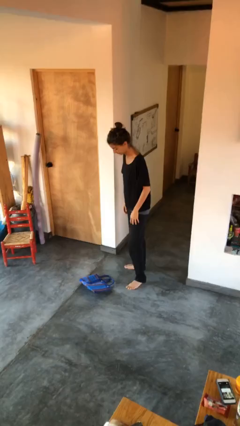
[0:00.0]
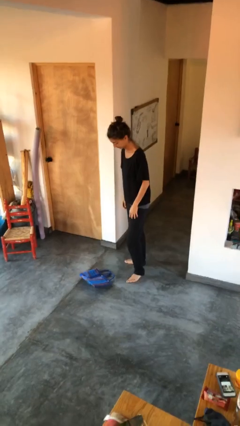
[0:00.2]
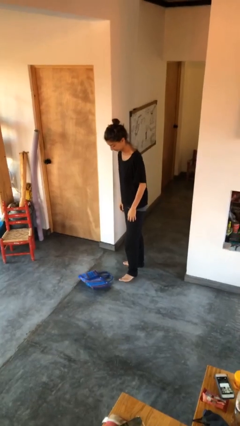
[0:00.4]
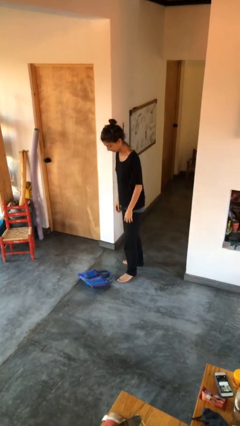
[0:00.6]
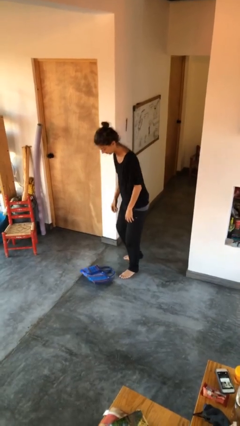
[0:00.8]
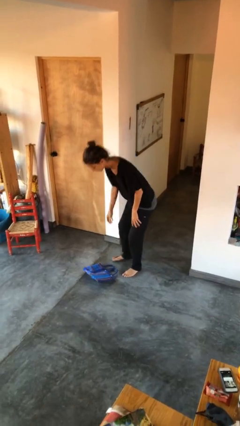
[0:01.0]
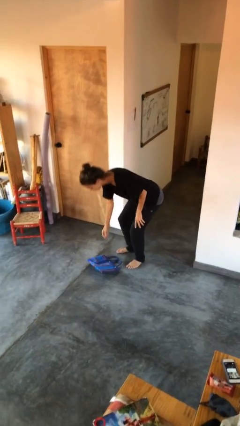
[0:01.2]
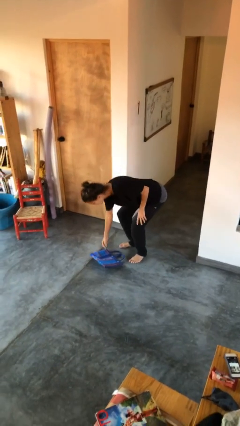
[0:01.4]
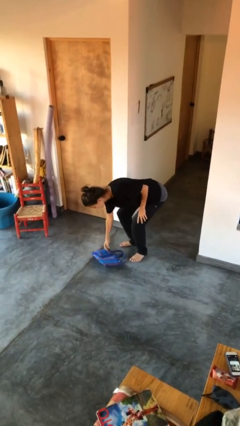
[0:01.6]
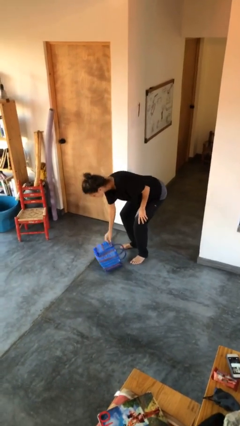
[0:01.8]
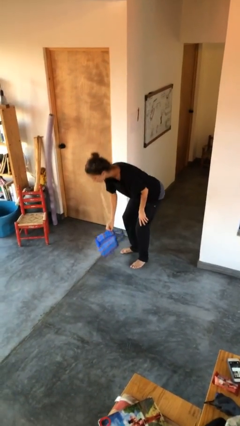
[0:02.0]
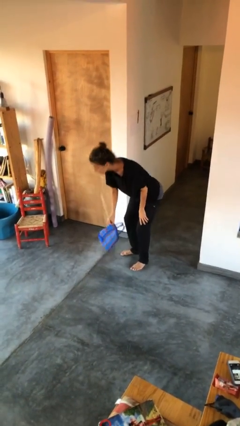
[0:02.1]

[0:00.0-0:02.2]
person picks up object from floor

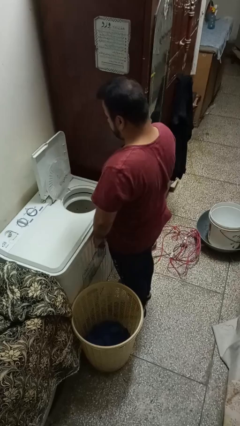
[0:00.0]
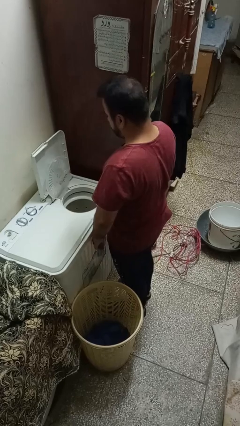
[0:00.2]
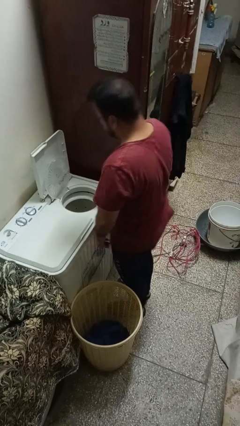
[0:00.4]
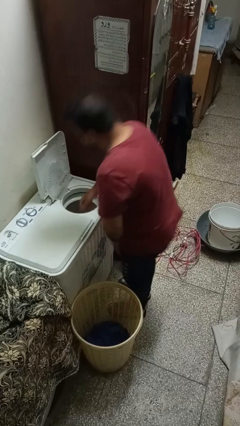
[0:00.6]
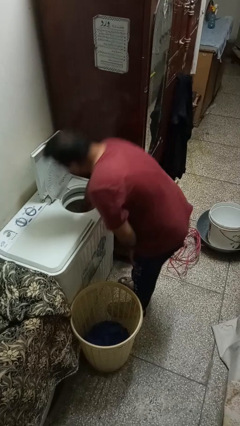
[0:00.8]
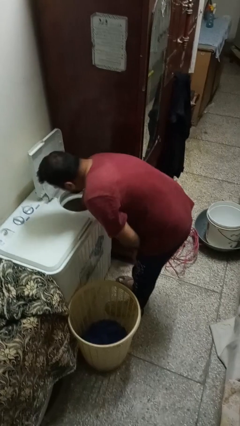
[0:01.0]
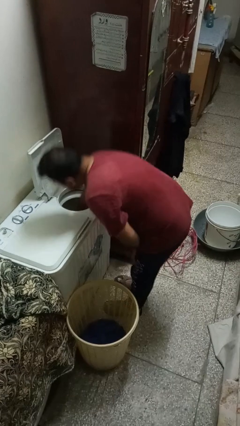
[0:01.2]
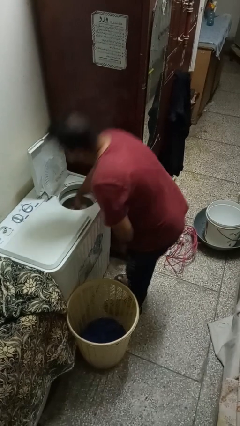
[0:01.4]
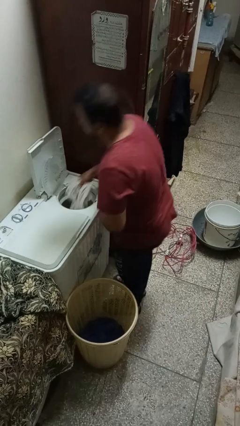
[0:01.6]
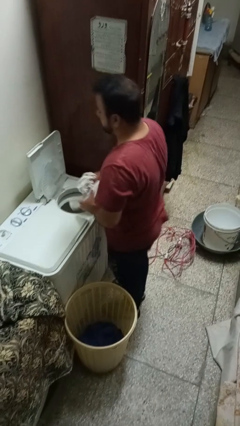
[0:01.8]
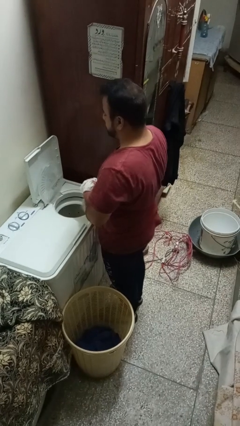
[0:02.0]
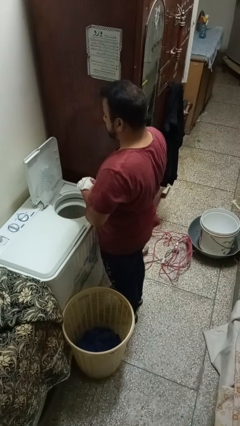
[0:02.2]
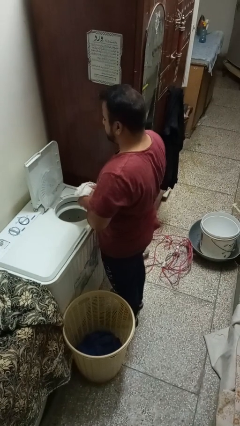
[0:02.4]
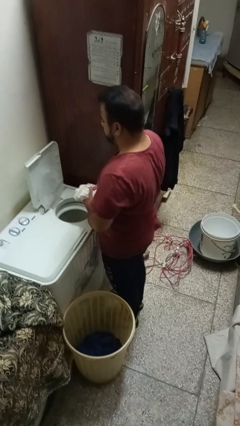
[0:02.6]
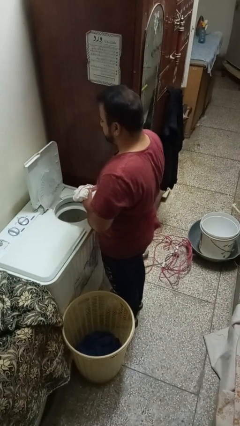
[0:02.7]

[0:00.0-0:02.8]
person unloads dryer

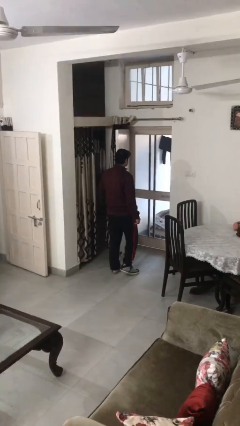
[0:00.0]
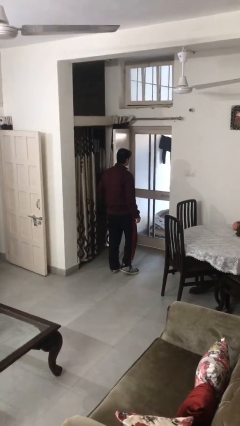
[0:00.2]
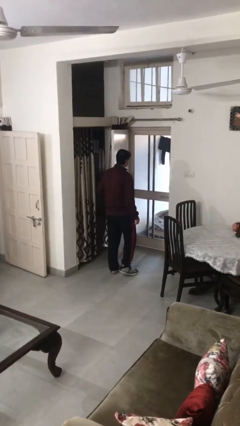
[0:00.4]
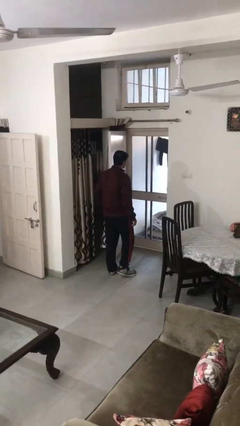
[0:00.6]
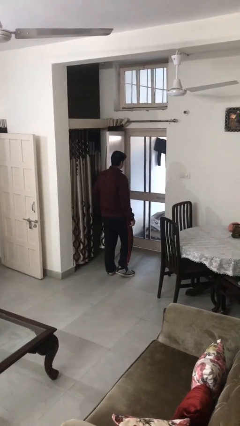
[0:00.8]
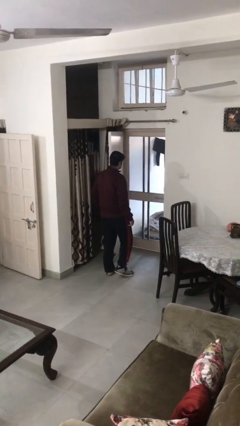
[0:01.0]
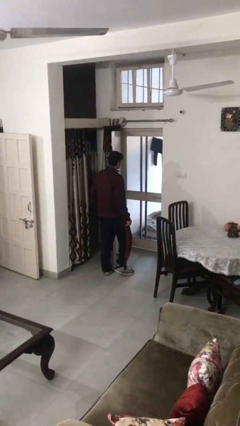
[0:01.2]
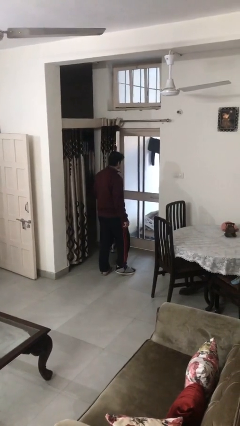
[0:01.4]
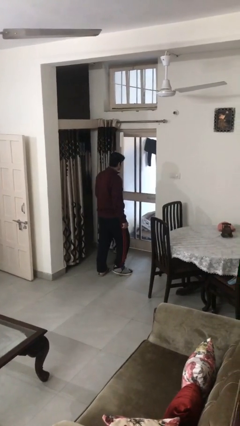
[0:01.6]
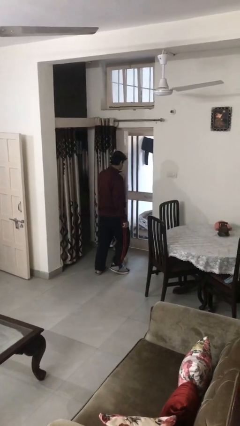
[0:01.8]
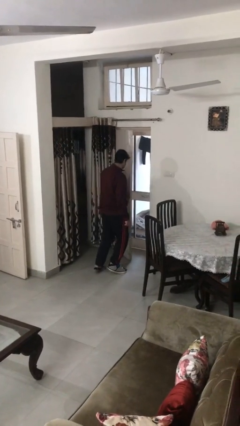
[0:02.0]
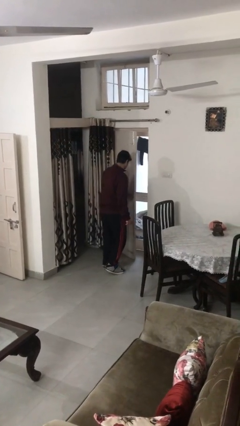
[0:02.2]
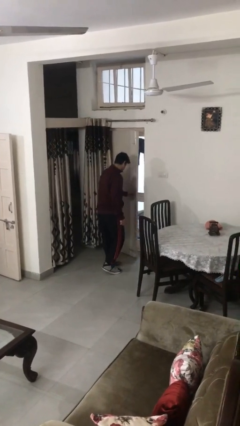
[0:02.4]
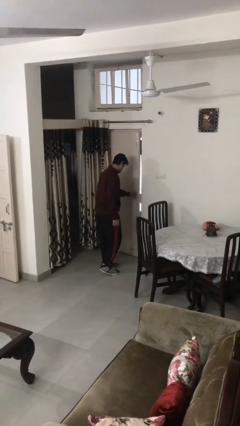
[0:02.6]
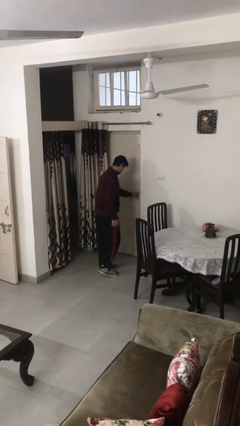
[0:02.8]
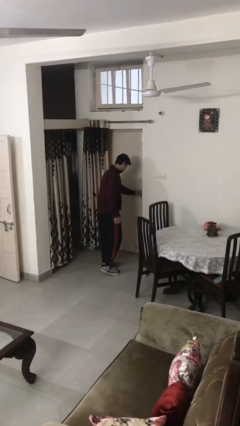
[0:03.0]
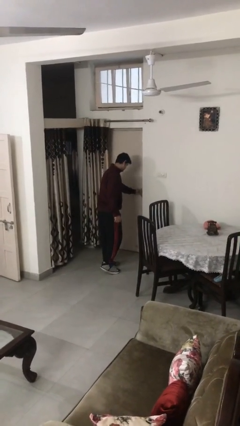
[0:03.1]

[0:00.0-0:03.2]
person closes facility door

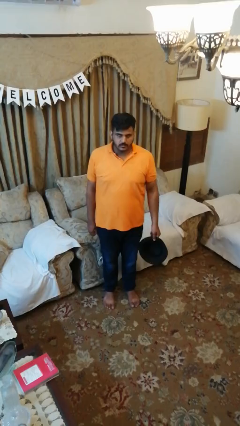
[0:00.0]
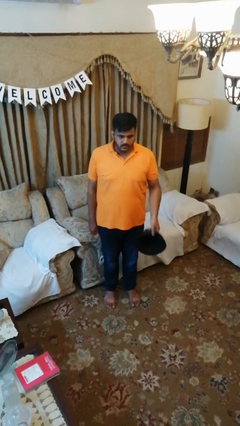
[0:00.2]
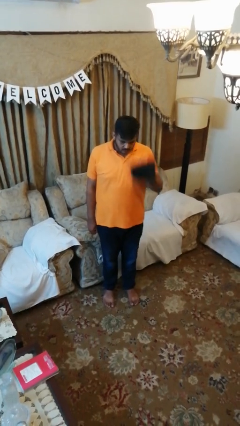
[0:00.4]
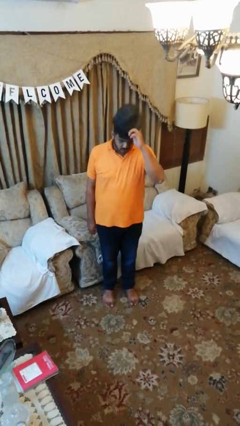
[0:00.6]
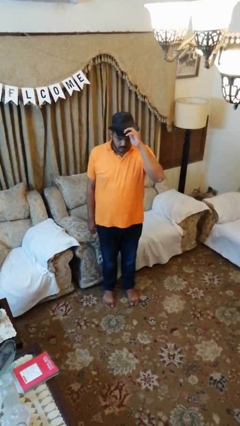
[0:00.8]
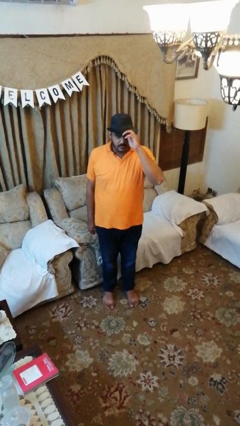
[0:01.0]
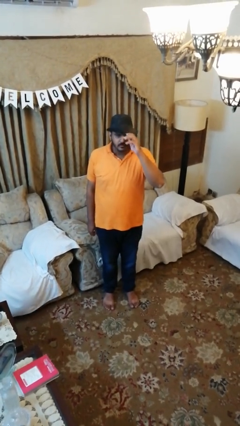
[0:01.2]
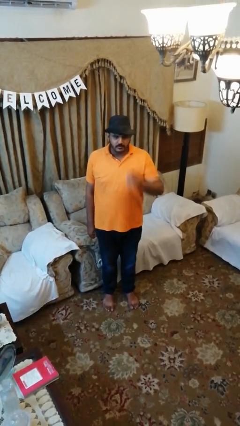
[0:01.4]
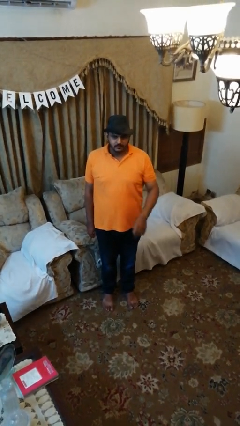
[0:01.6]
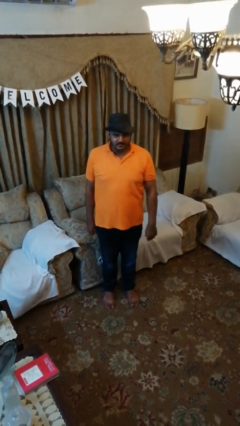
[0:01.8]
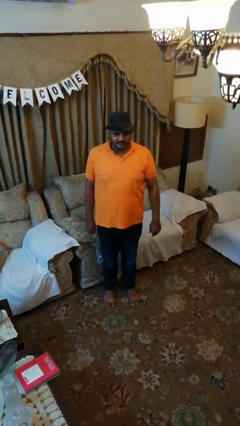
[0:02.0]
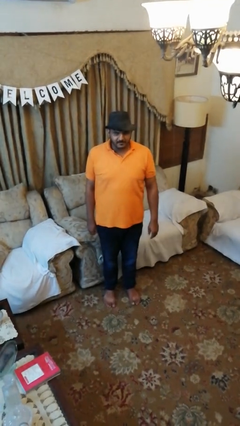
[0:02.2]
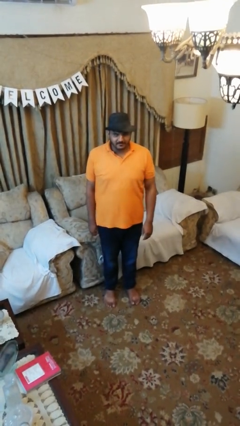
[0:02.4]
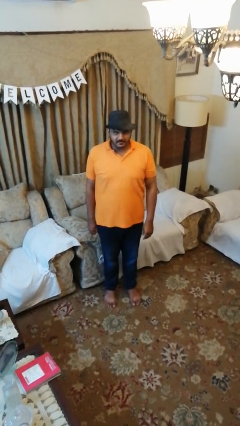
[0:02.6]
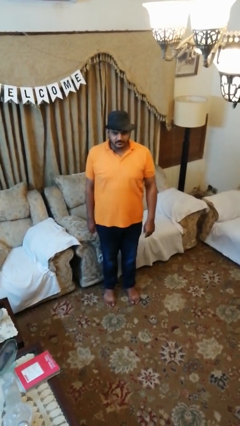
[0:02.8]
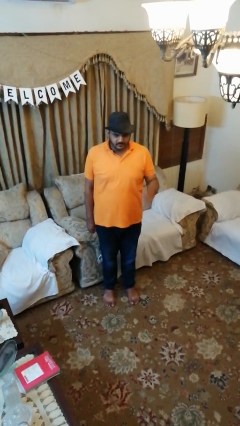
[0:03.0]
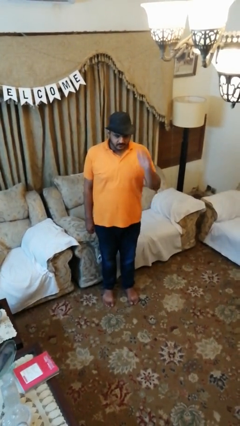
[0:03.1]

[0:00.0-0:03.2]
person puts on hat

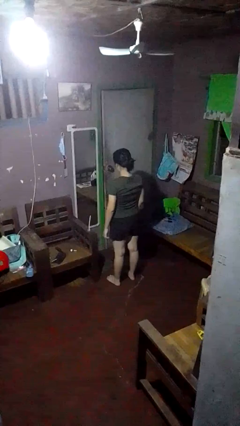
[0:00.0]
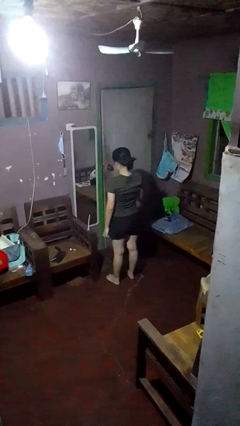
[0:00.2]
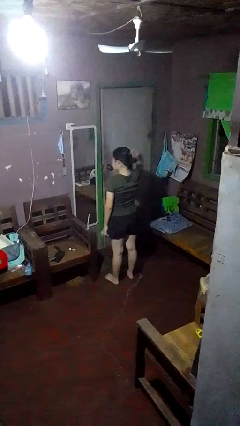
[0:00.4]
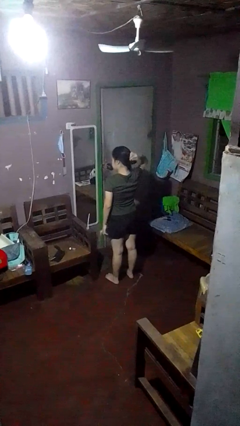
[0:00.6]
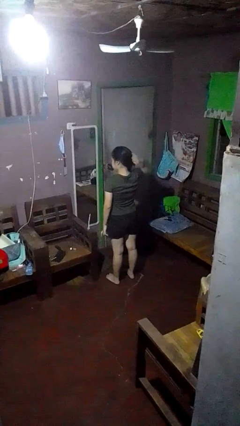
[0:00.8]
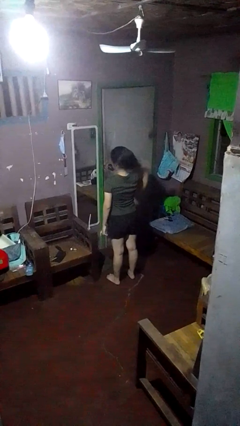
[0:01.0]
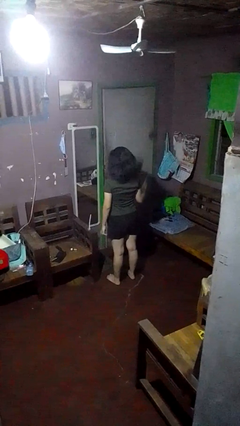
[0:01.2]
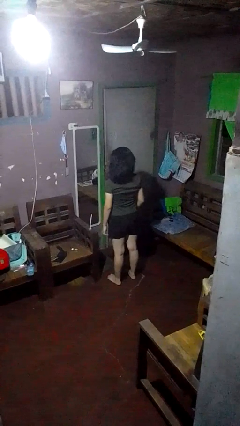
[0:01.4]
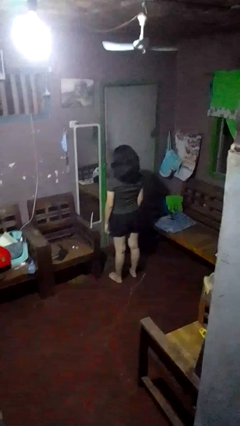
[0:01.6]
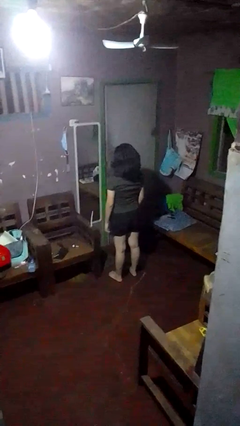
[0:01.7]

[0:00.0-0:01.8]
person takes off hairtie

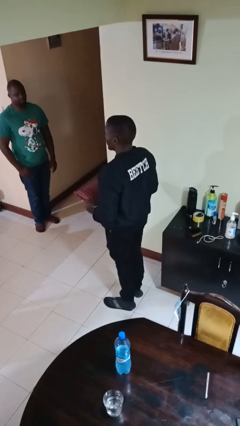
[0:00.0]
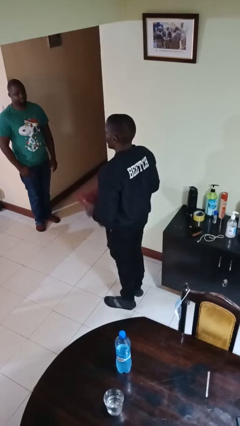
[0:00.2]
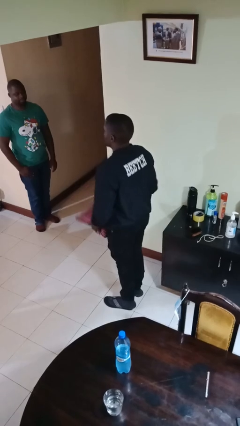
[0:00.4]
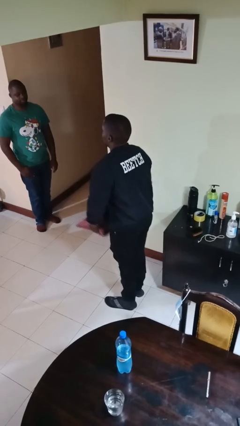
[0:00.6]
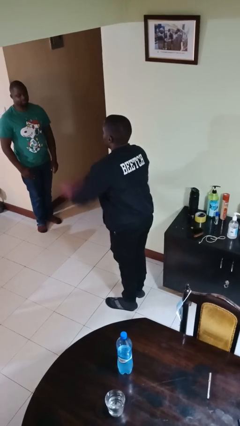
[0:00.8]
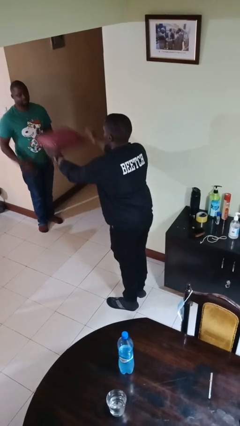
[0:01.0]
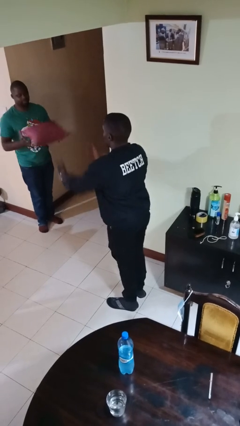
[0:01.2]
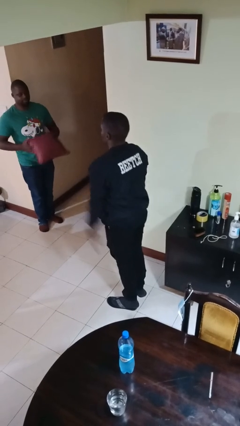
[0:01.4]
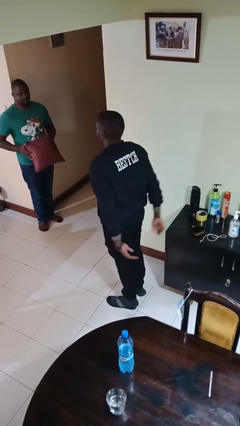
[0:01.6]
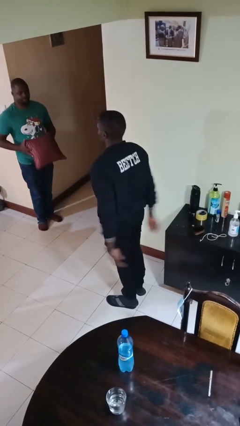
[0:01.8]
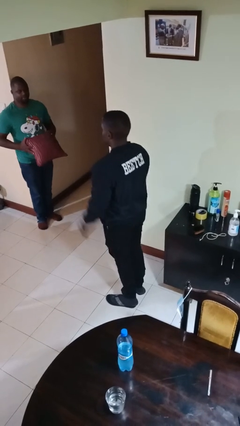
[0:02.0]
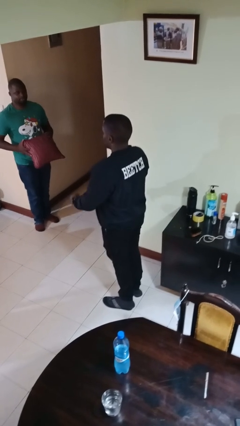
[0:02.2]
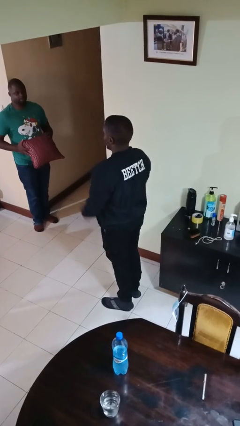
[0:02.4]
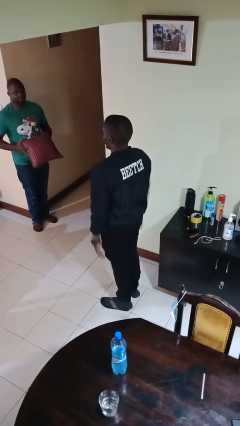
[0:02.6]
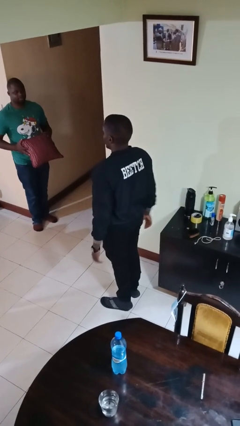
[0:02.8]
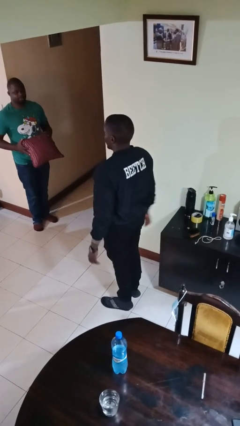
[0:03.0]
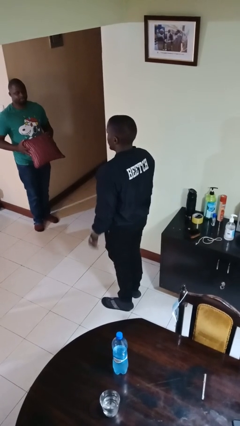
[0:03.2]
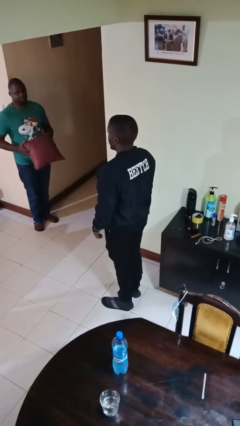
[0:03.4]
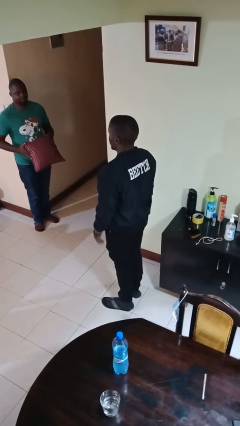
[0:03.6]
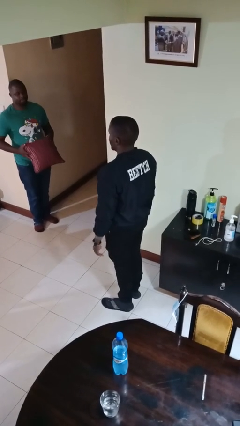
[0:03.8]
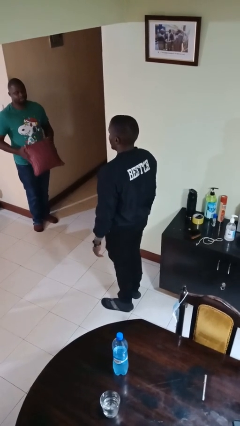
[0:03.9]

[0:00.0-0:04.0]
person throws object to person

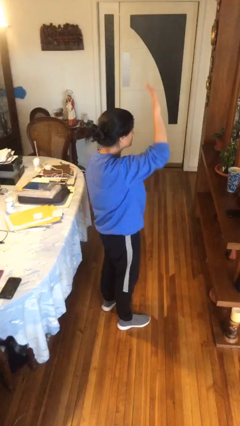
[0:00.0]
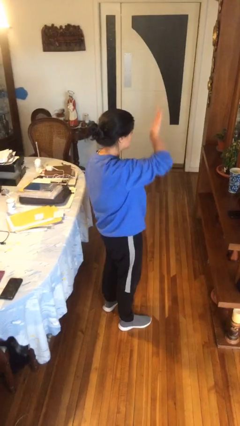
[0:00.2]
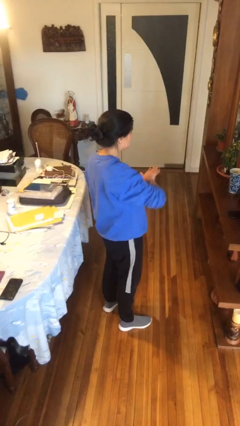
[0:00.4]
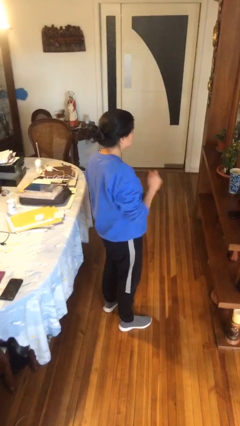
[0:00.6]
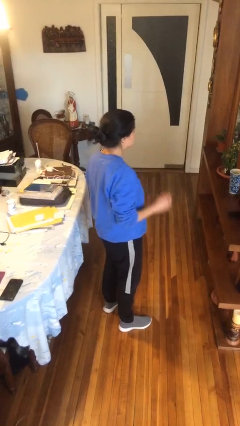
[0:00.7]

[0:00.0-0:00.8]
person gestures swipe down
